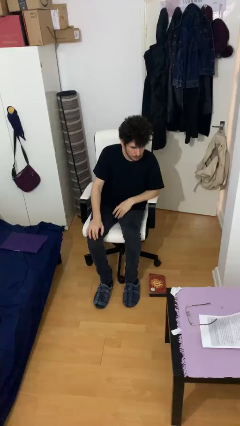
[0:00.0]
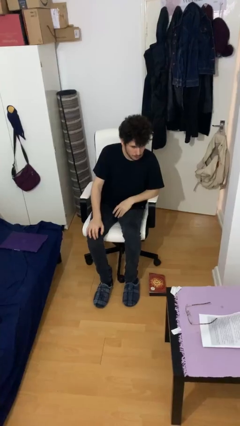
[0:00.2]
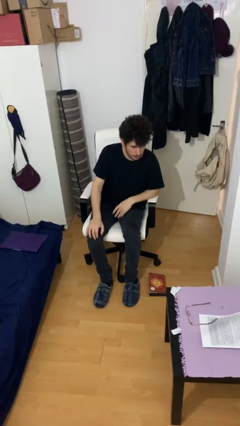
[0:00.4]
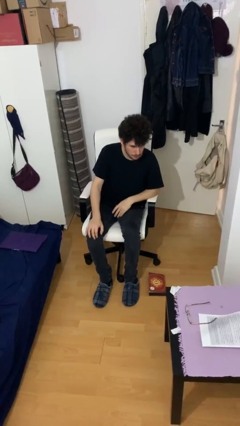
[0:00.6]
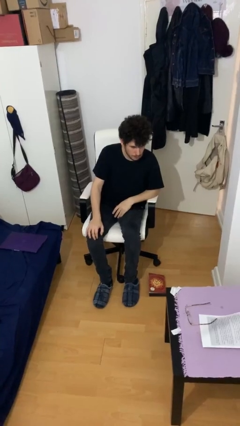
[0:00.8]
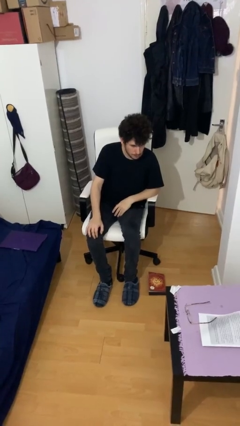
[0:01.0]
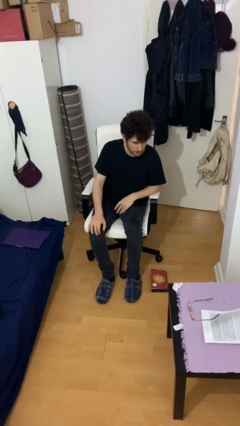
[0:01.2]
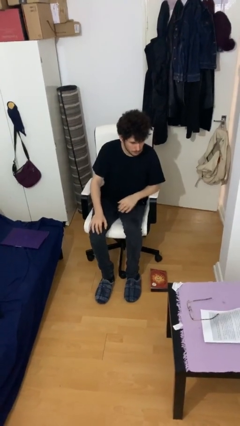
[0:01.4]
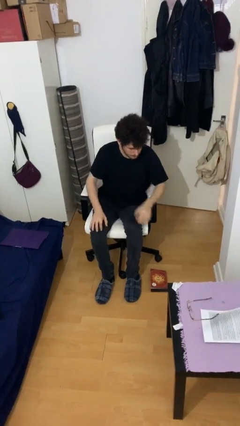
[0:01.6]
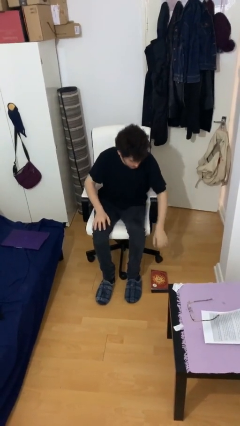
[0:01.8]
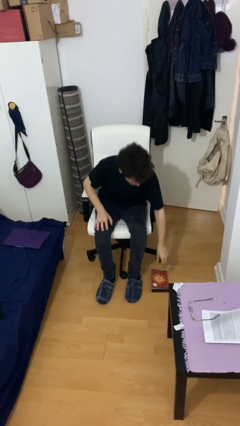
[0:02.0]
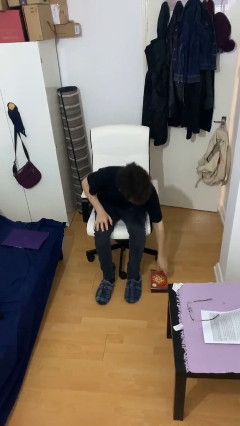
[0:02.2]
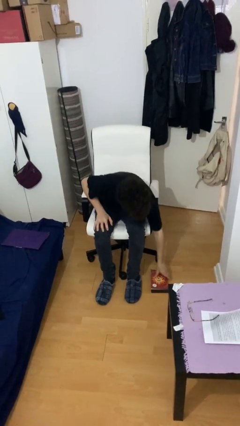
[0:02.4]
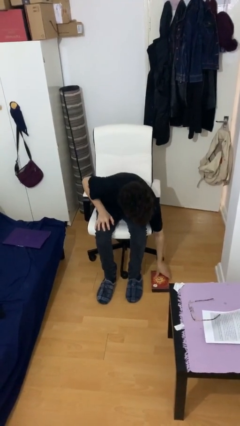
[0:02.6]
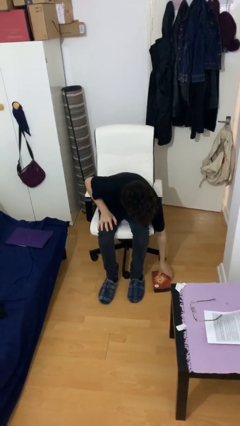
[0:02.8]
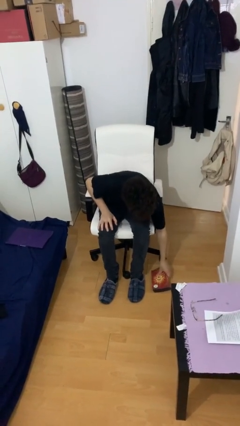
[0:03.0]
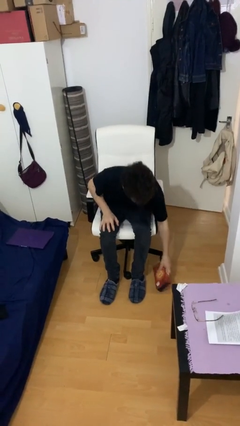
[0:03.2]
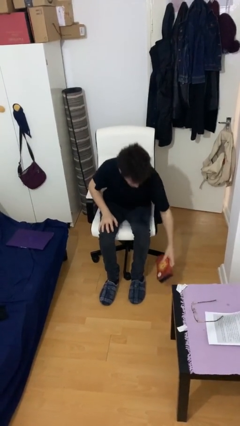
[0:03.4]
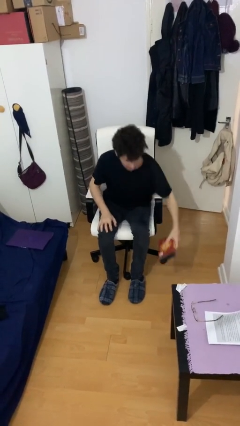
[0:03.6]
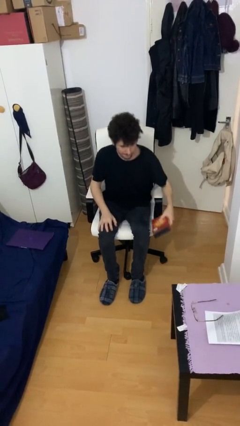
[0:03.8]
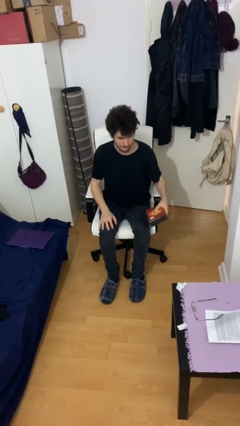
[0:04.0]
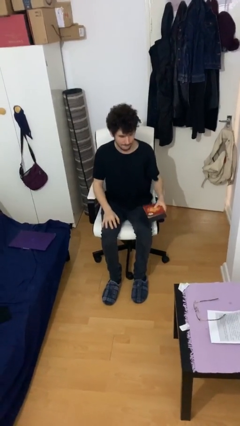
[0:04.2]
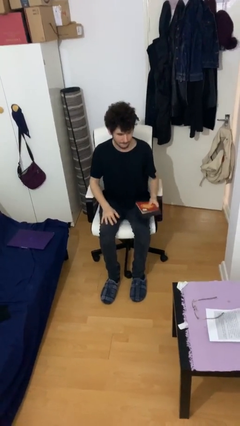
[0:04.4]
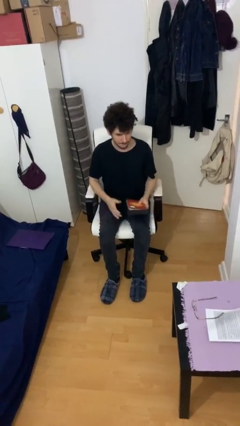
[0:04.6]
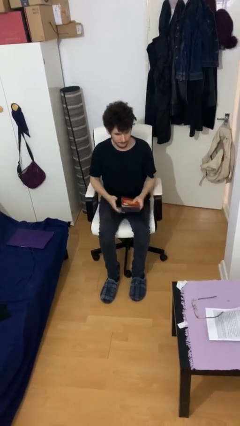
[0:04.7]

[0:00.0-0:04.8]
person picks up object from floor

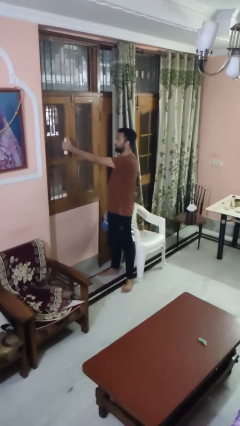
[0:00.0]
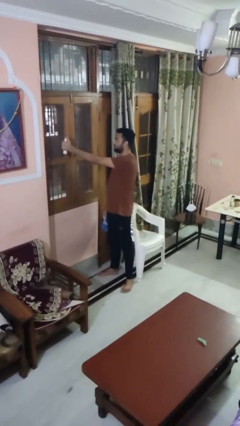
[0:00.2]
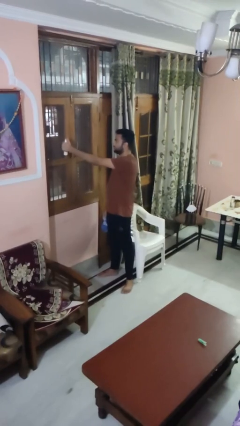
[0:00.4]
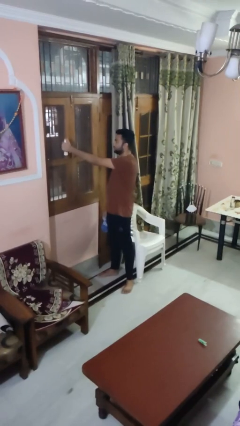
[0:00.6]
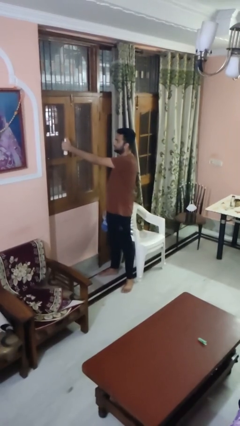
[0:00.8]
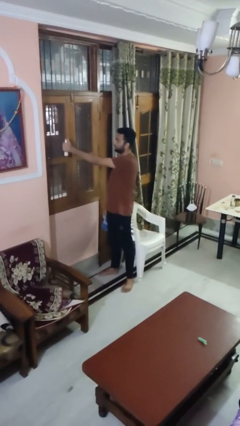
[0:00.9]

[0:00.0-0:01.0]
person sprays from bottle

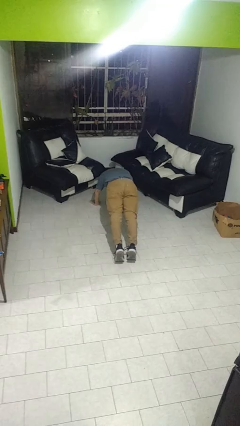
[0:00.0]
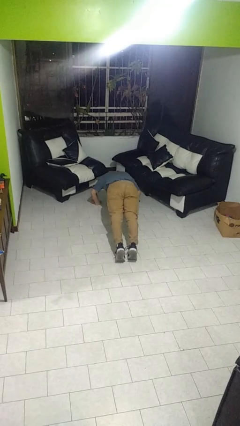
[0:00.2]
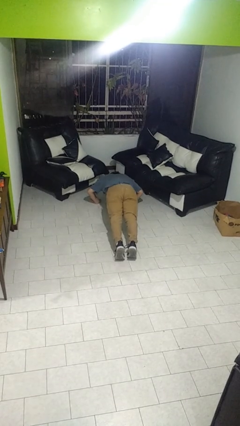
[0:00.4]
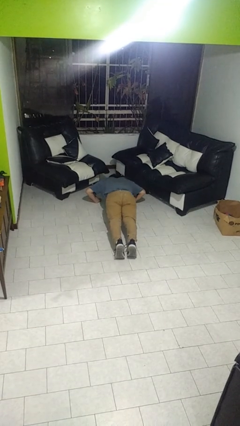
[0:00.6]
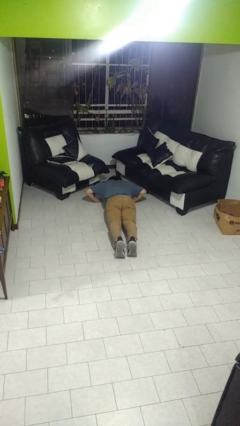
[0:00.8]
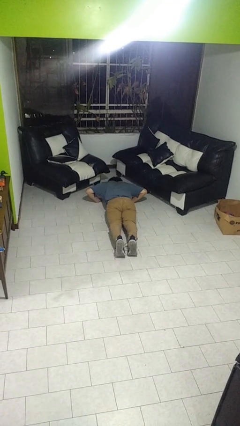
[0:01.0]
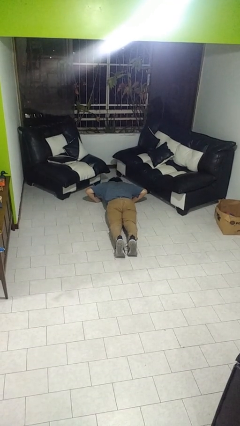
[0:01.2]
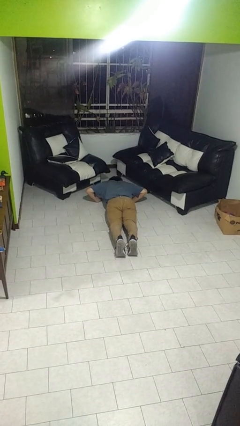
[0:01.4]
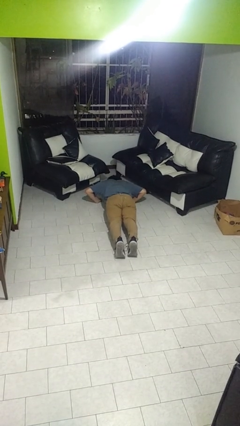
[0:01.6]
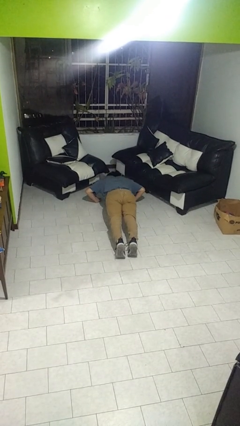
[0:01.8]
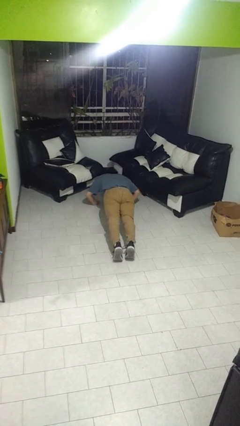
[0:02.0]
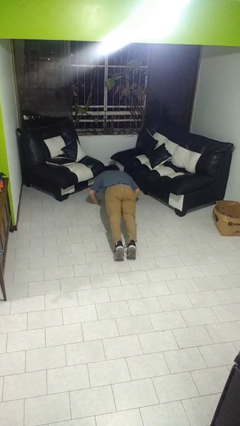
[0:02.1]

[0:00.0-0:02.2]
person exercises with pushup

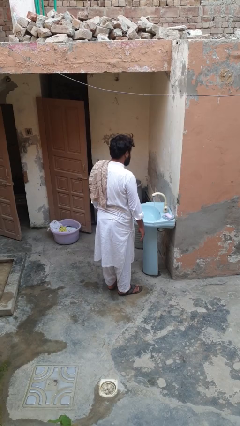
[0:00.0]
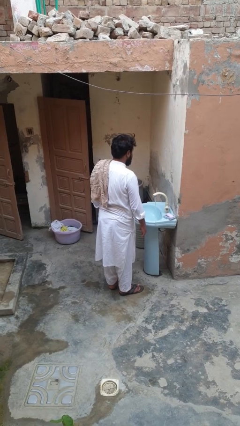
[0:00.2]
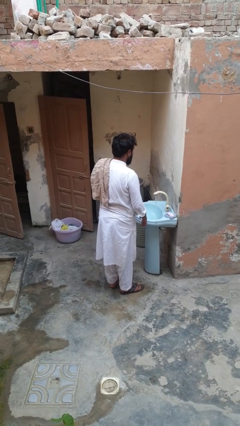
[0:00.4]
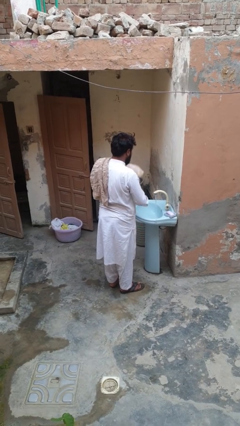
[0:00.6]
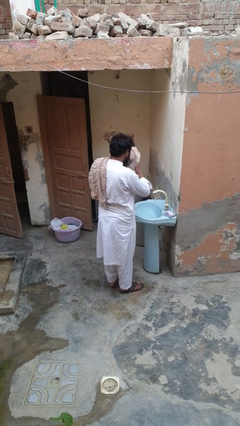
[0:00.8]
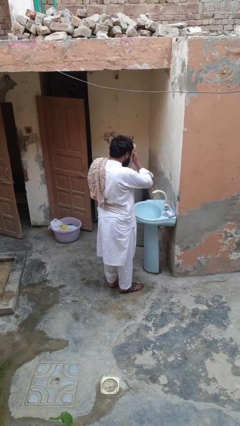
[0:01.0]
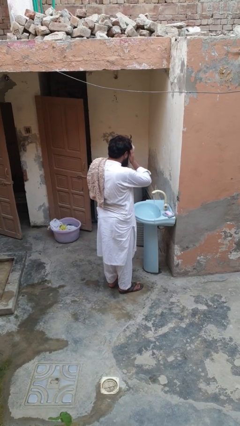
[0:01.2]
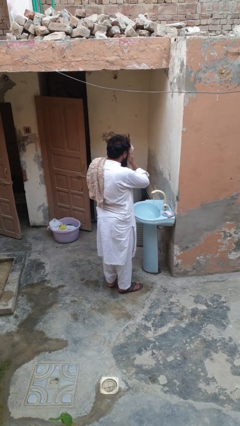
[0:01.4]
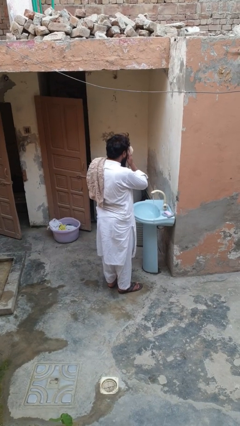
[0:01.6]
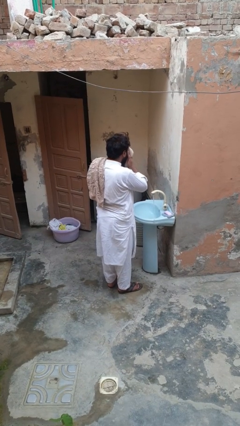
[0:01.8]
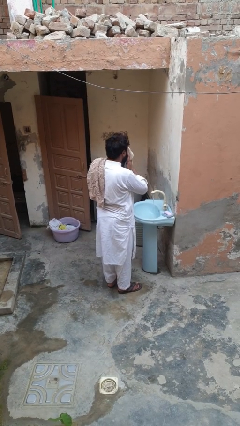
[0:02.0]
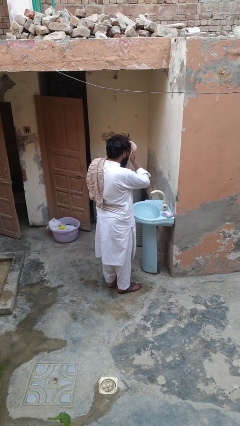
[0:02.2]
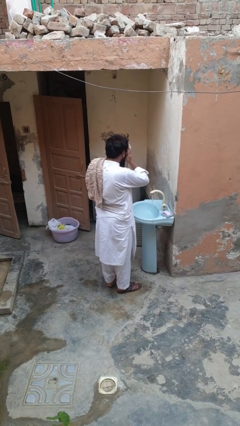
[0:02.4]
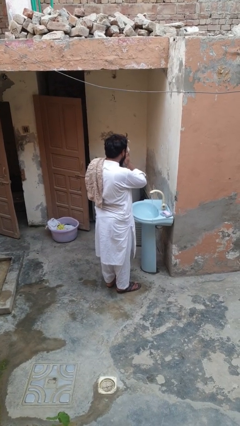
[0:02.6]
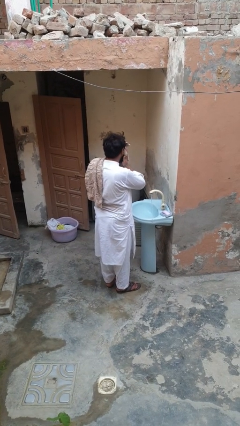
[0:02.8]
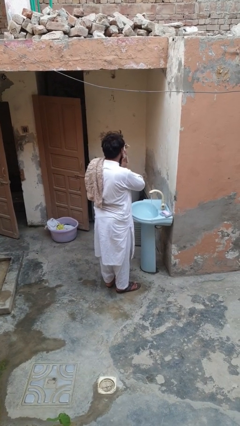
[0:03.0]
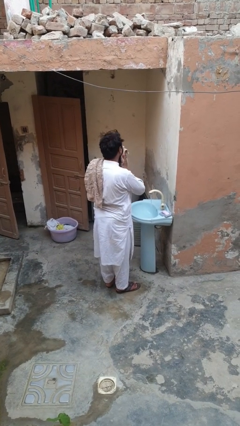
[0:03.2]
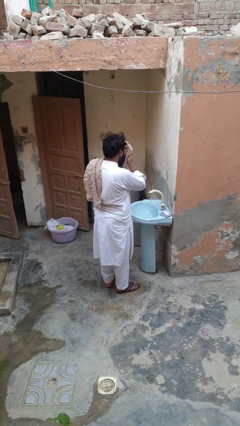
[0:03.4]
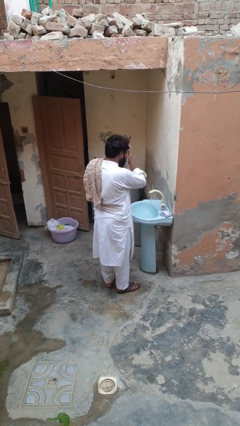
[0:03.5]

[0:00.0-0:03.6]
person dries face with towel

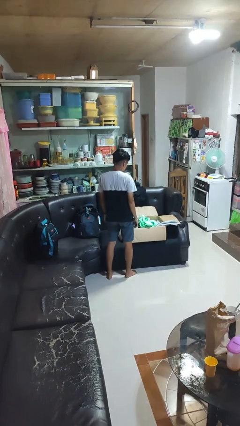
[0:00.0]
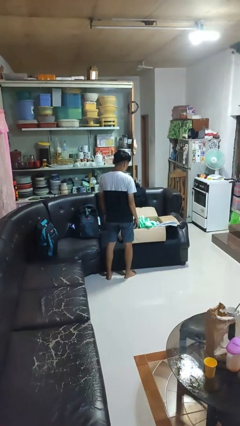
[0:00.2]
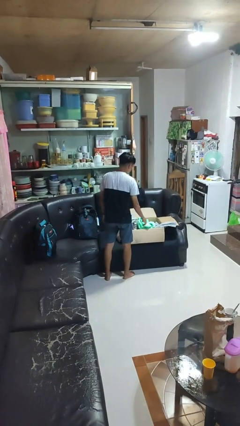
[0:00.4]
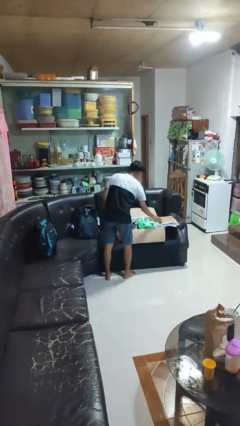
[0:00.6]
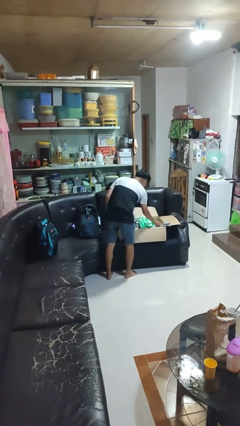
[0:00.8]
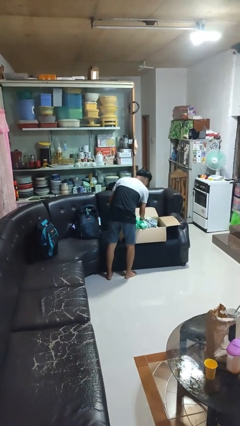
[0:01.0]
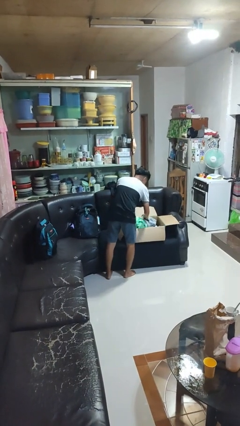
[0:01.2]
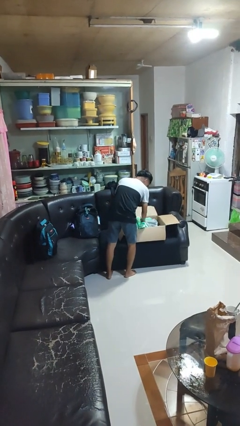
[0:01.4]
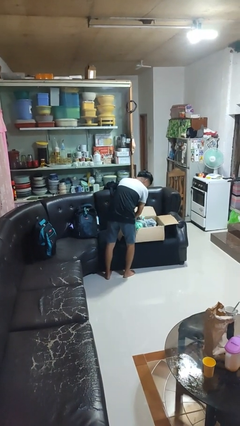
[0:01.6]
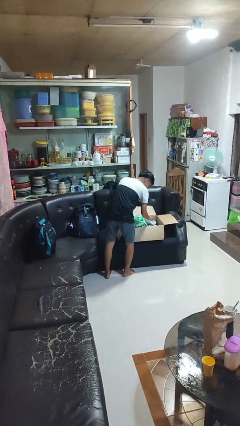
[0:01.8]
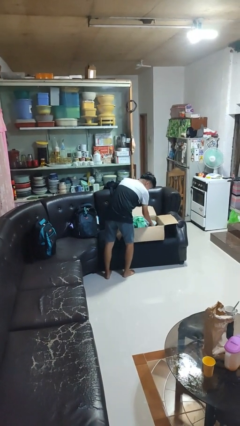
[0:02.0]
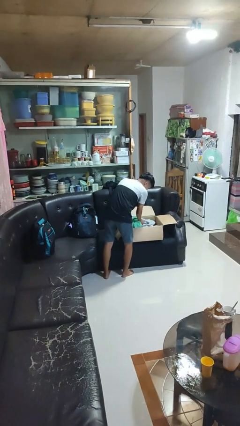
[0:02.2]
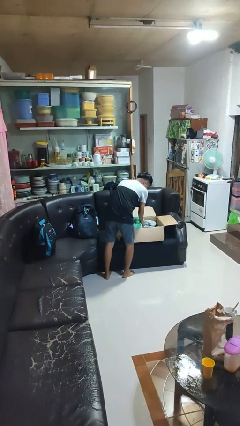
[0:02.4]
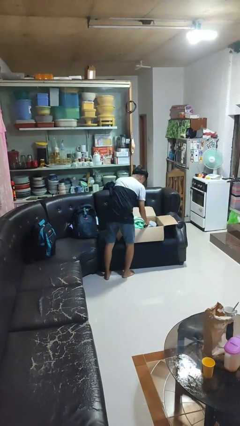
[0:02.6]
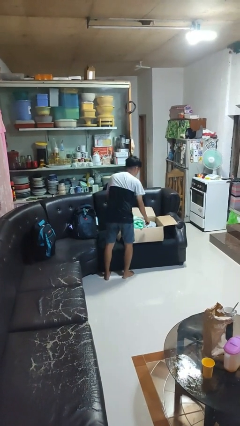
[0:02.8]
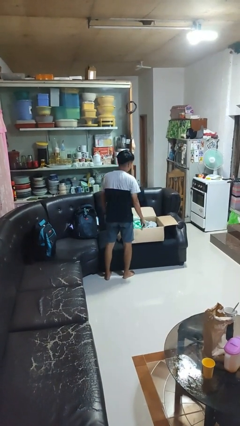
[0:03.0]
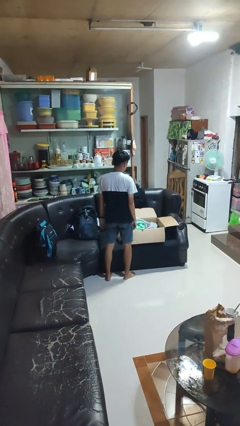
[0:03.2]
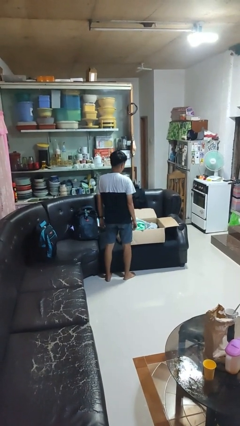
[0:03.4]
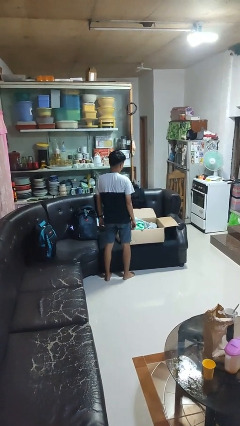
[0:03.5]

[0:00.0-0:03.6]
person searches in box

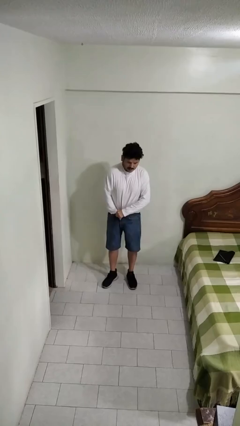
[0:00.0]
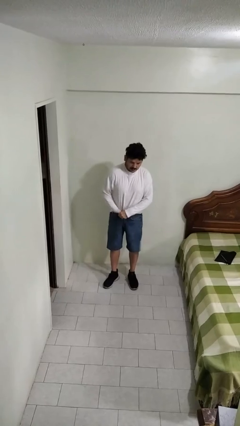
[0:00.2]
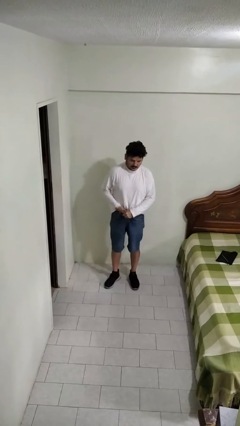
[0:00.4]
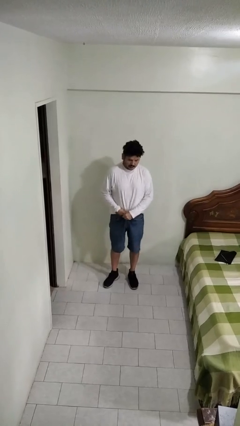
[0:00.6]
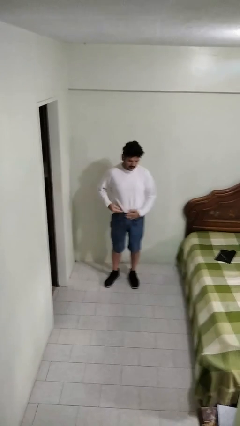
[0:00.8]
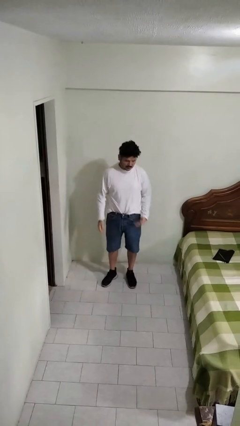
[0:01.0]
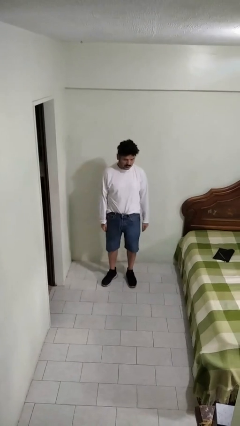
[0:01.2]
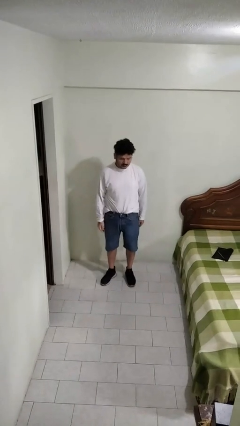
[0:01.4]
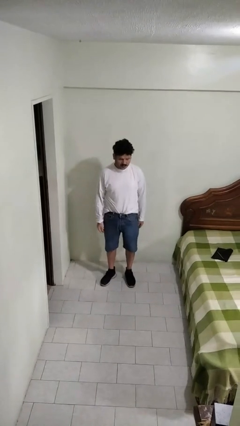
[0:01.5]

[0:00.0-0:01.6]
person tucks in shirt

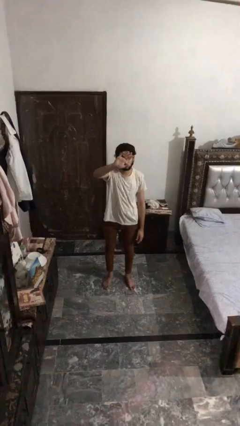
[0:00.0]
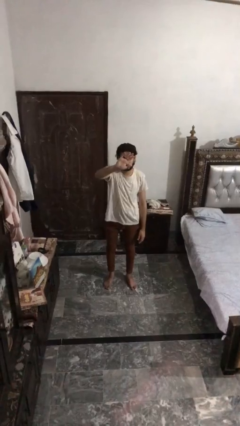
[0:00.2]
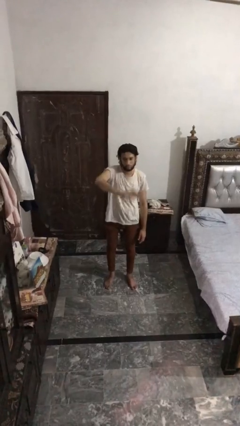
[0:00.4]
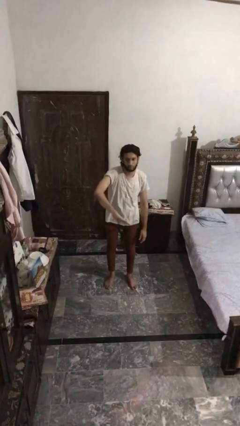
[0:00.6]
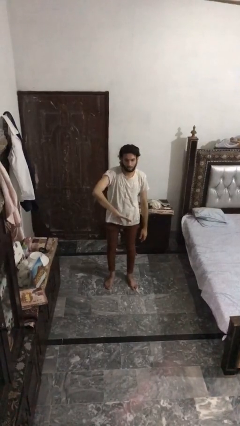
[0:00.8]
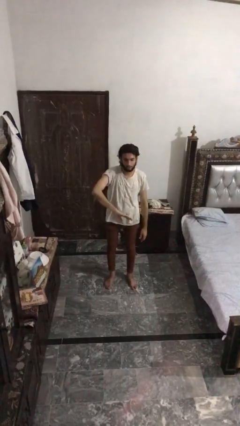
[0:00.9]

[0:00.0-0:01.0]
person gestures swipe down
